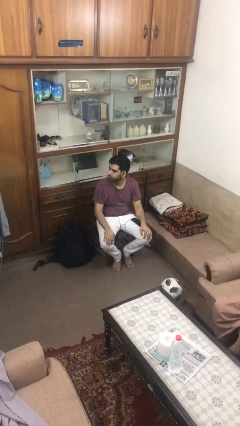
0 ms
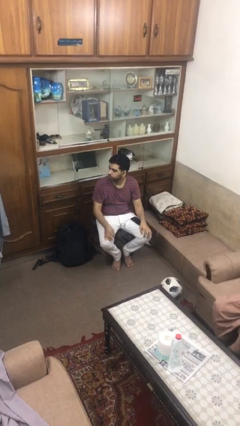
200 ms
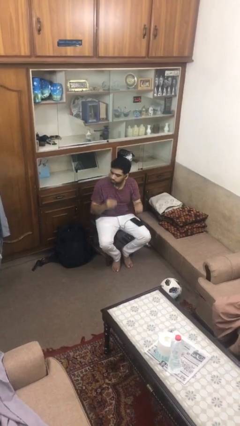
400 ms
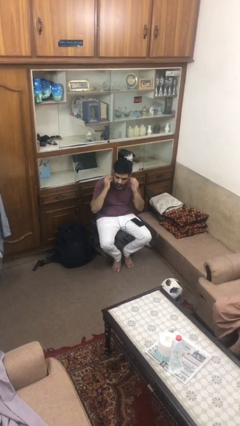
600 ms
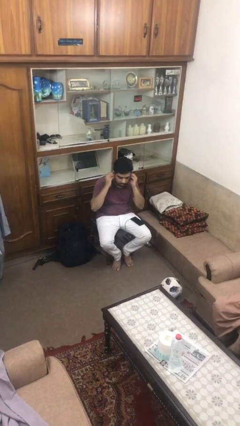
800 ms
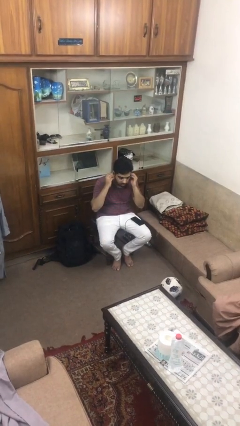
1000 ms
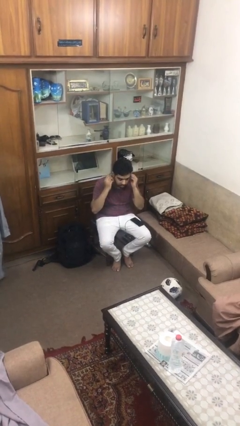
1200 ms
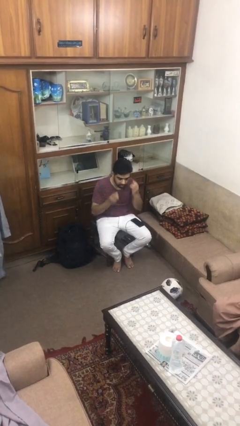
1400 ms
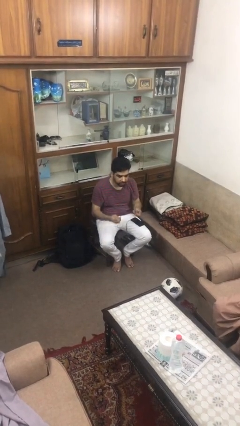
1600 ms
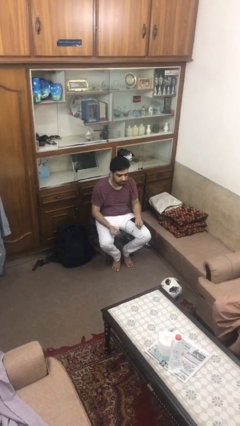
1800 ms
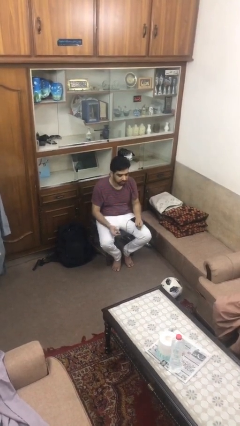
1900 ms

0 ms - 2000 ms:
person takes off headphones

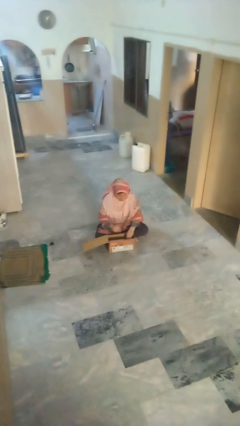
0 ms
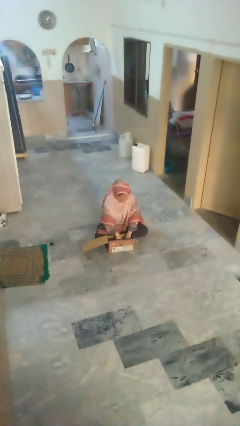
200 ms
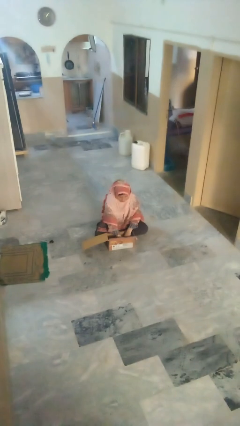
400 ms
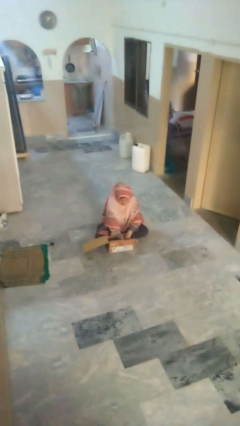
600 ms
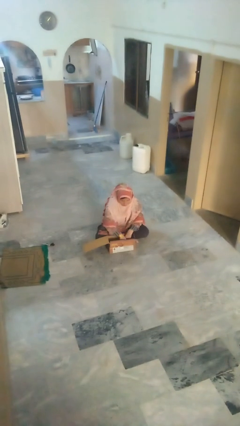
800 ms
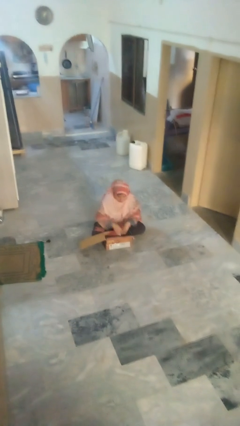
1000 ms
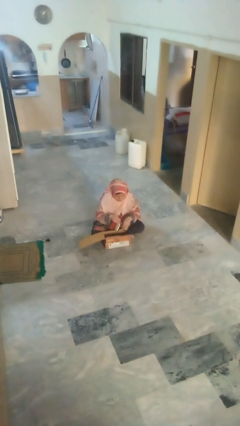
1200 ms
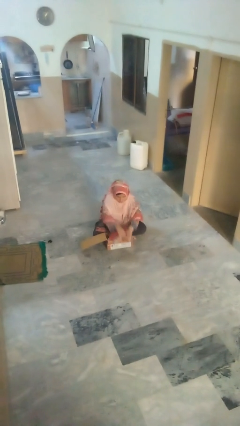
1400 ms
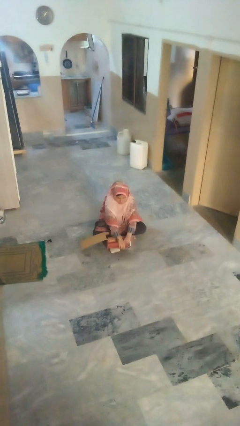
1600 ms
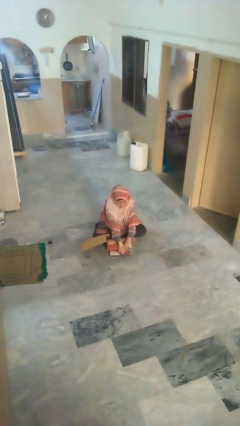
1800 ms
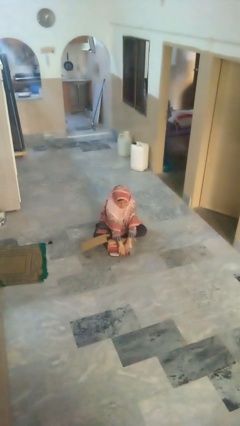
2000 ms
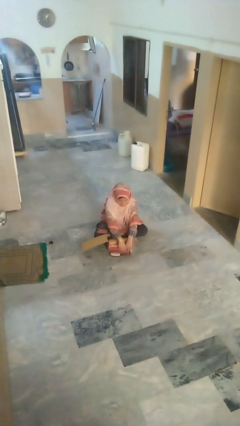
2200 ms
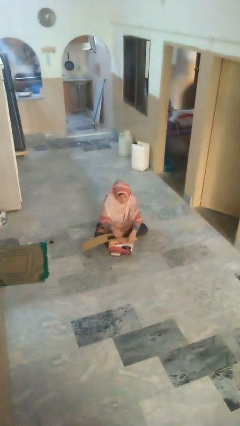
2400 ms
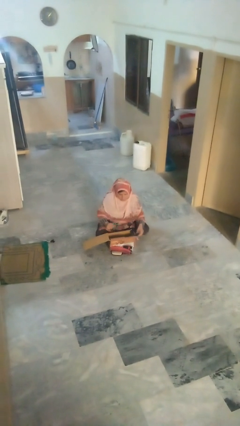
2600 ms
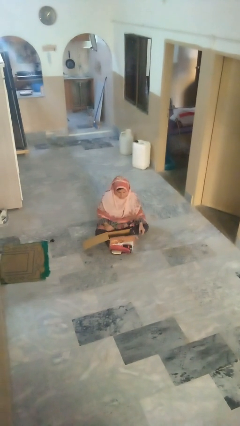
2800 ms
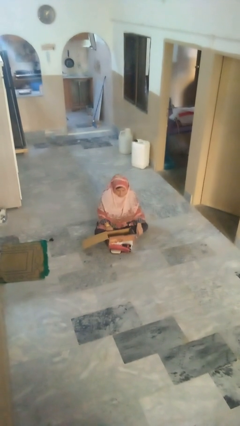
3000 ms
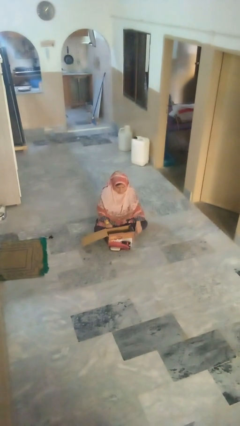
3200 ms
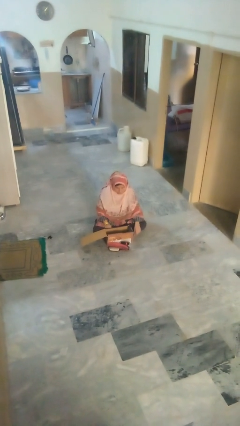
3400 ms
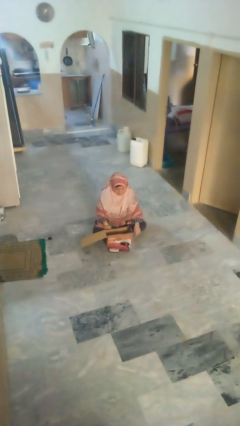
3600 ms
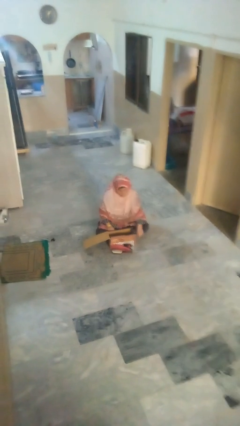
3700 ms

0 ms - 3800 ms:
person takes object from box

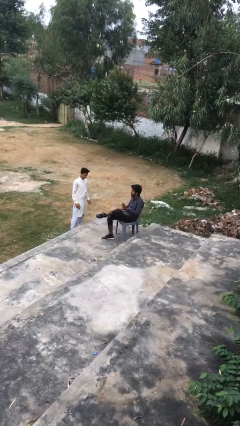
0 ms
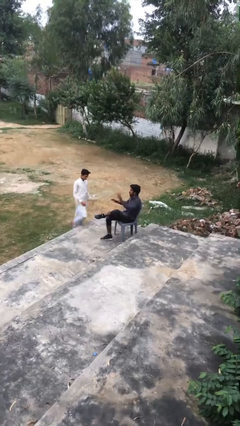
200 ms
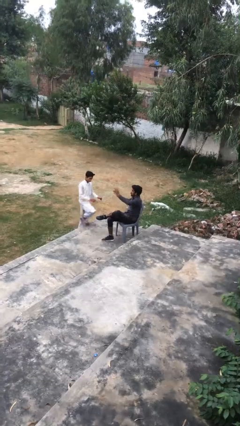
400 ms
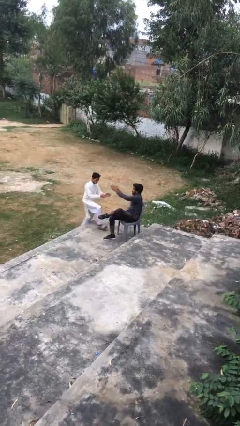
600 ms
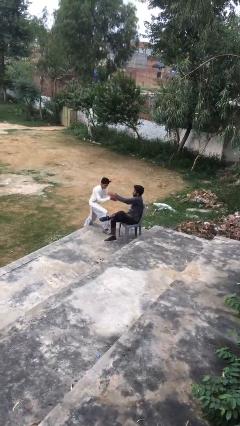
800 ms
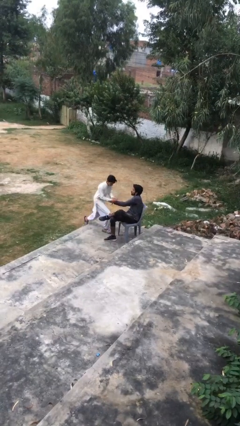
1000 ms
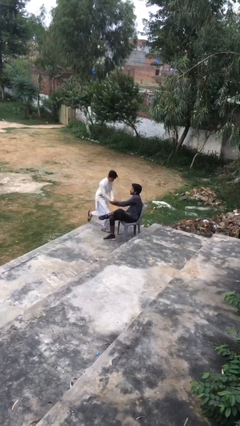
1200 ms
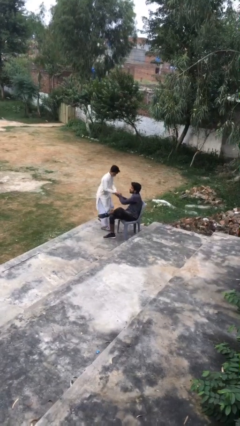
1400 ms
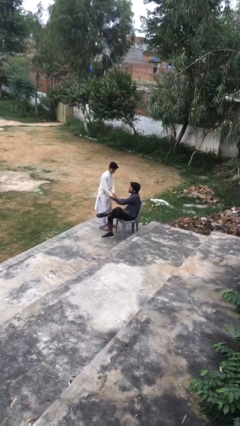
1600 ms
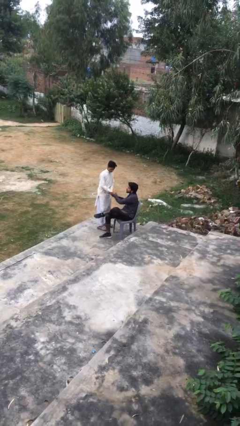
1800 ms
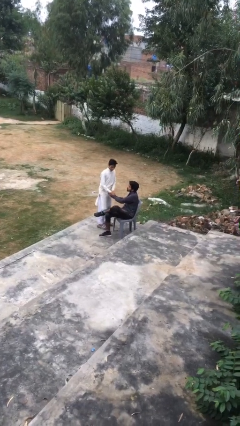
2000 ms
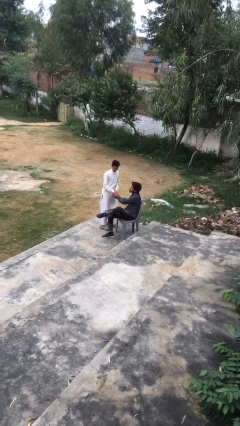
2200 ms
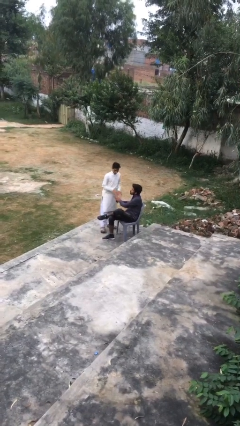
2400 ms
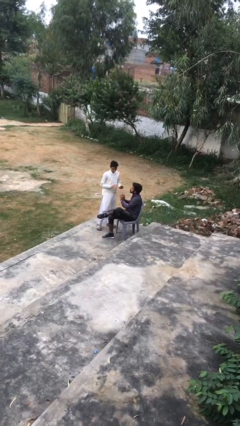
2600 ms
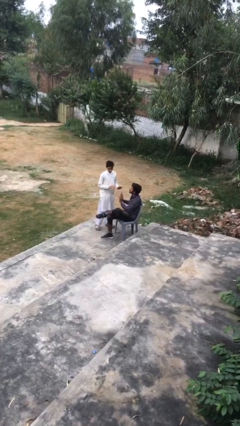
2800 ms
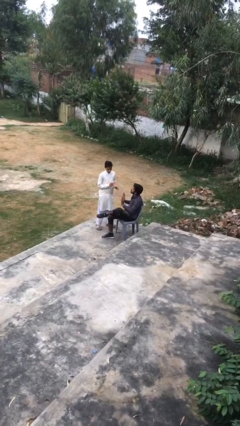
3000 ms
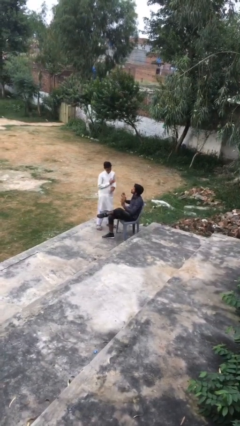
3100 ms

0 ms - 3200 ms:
person shakes hand

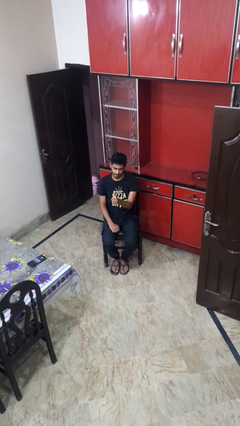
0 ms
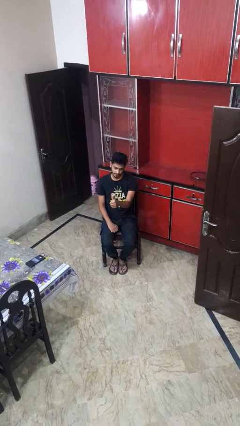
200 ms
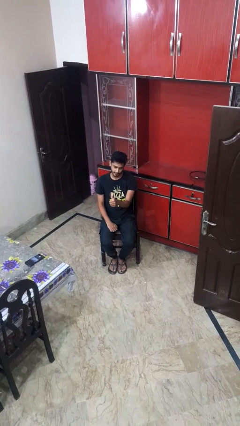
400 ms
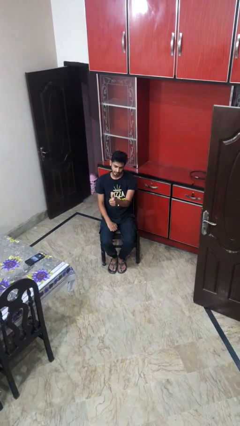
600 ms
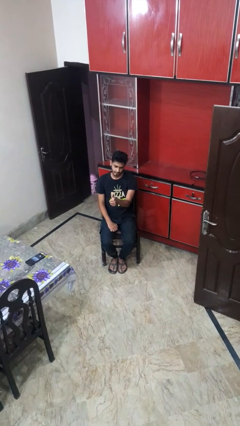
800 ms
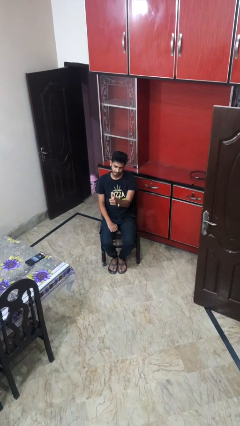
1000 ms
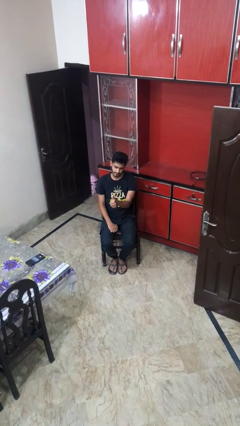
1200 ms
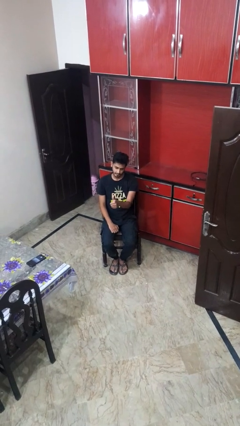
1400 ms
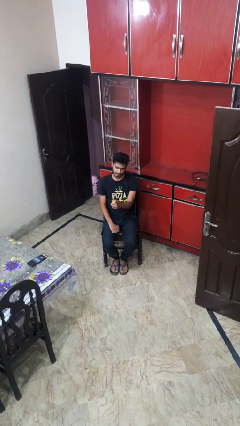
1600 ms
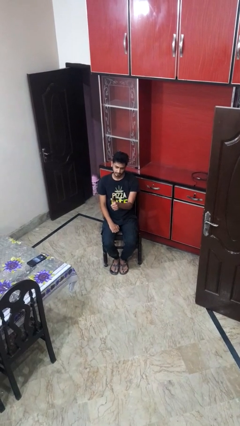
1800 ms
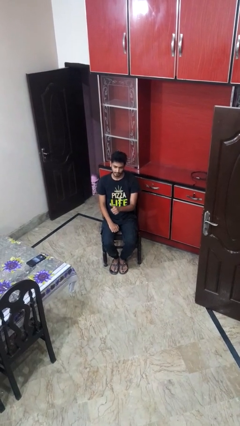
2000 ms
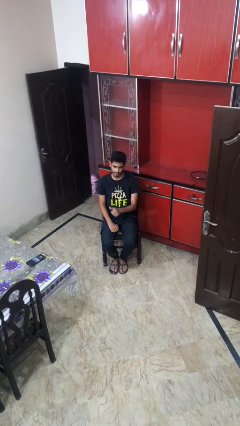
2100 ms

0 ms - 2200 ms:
person gestures thumbs up

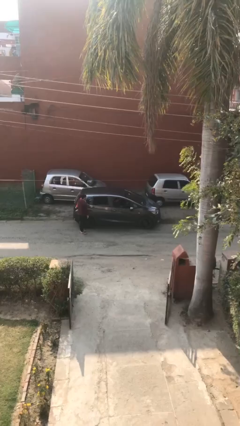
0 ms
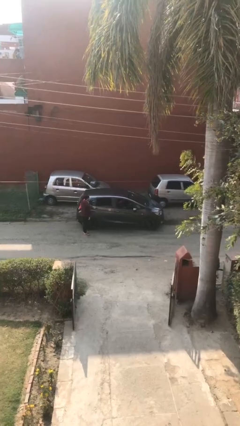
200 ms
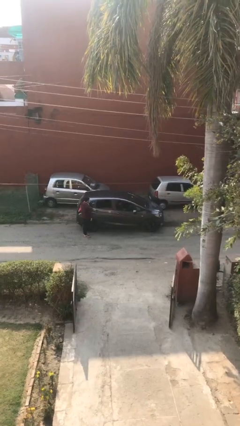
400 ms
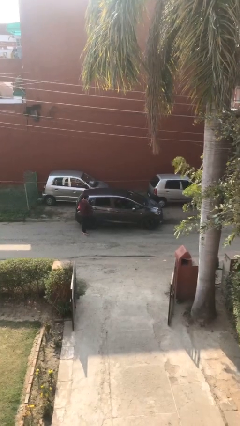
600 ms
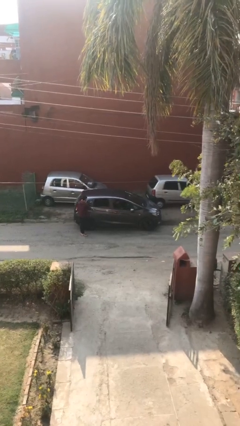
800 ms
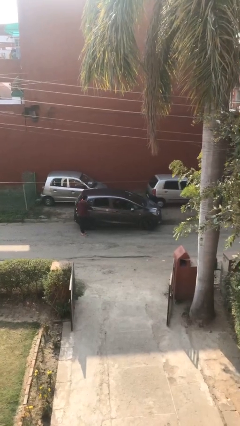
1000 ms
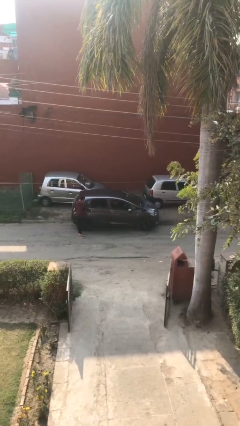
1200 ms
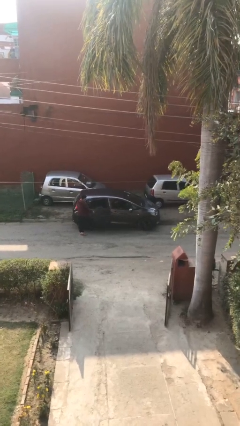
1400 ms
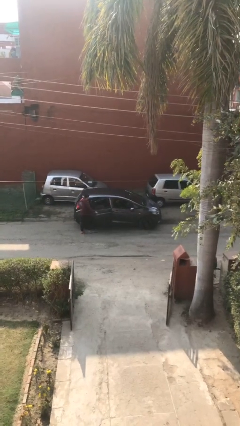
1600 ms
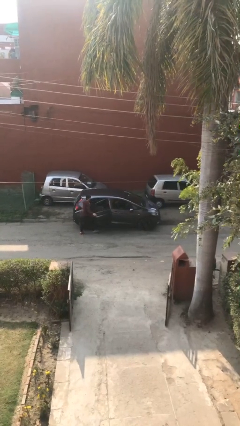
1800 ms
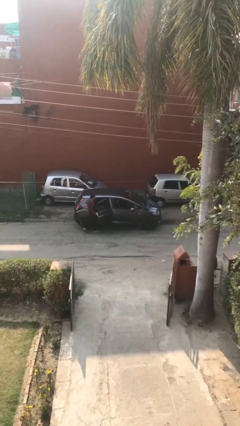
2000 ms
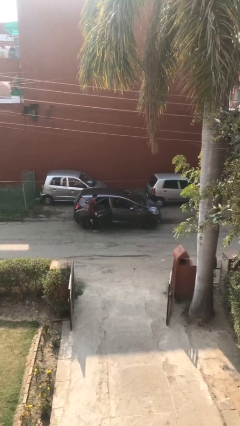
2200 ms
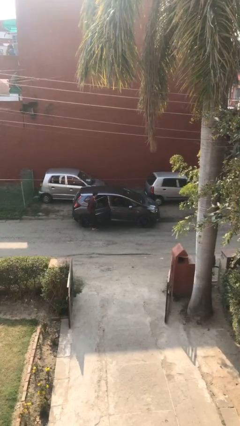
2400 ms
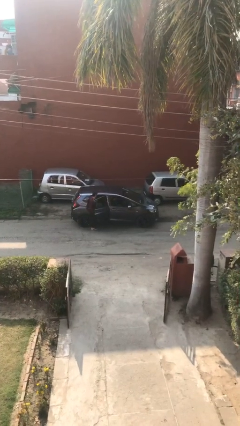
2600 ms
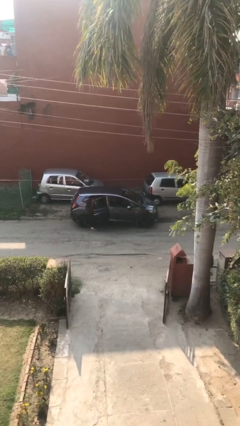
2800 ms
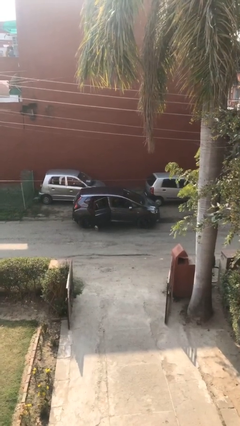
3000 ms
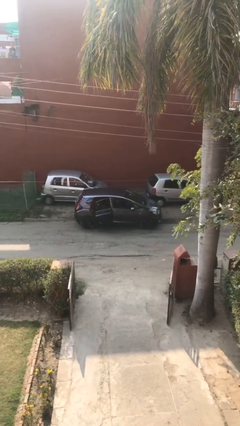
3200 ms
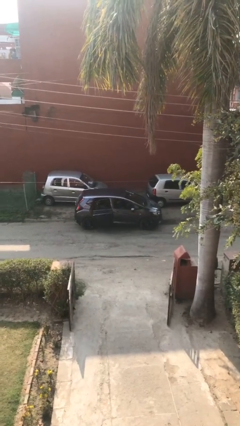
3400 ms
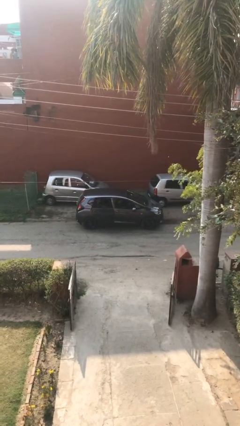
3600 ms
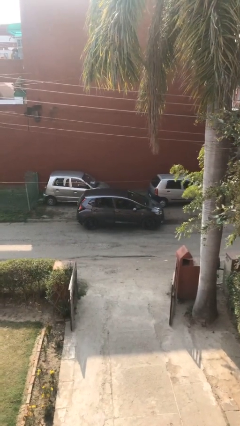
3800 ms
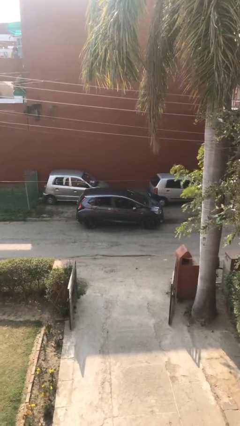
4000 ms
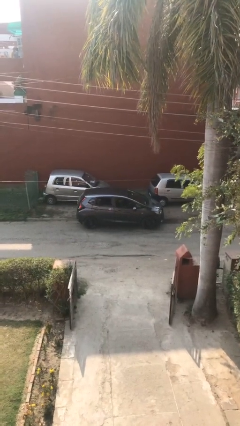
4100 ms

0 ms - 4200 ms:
car picks up person

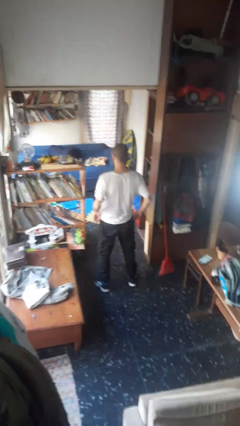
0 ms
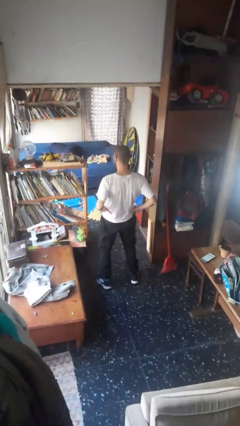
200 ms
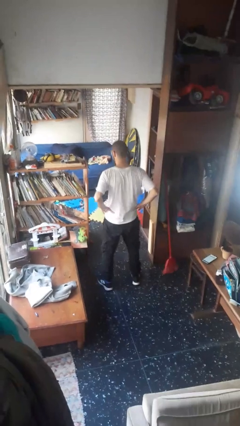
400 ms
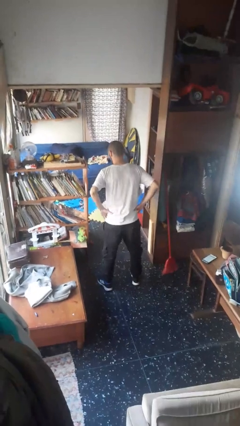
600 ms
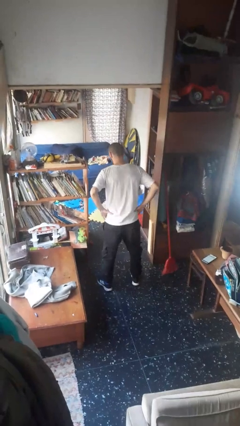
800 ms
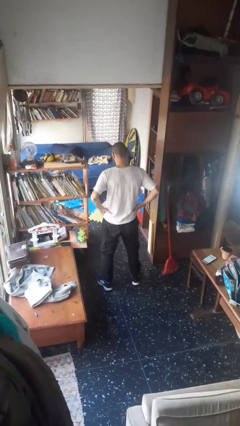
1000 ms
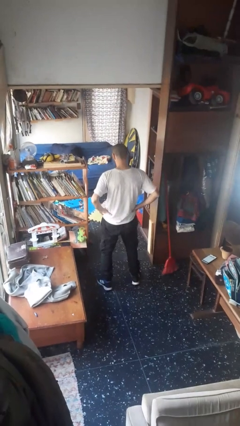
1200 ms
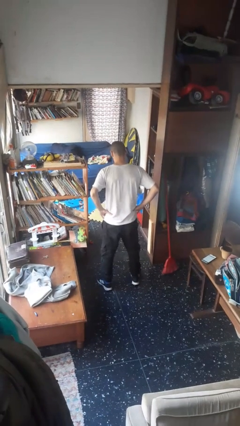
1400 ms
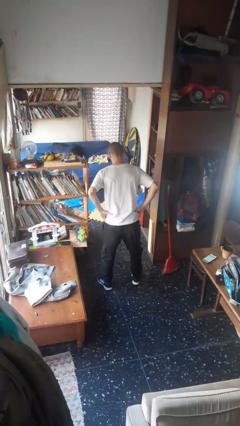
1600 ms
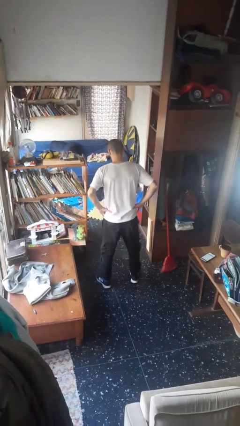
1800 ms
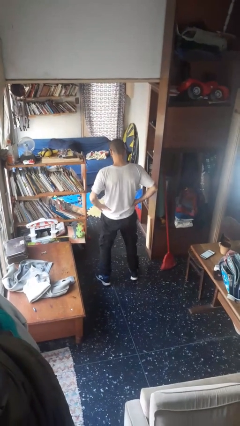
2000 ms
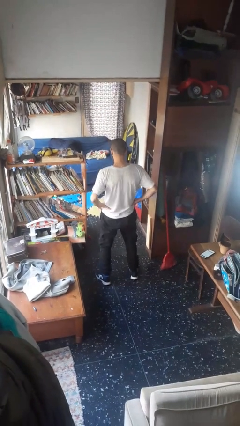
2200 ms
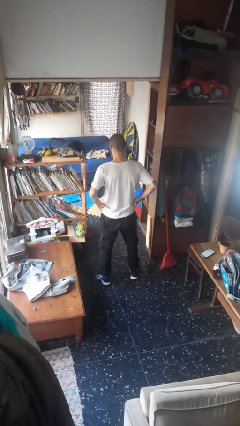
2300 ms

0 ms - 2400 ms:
person wiggles hips
